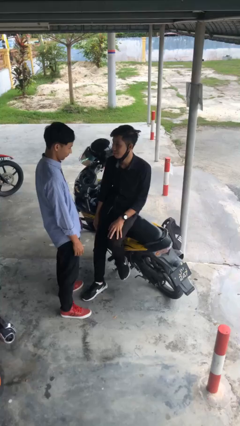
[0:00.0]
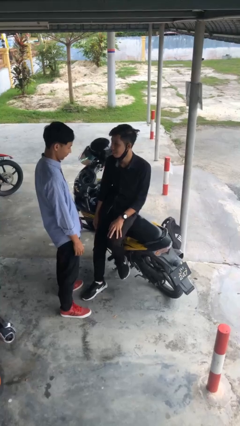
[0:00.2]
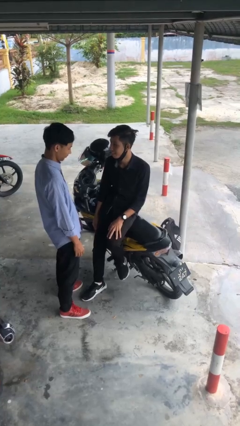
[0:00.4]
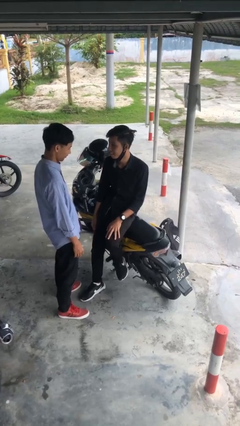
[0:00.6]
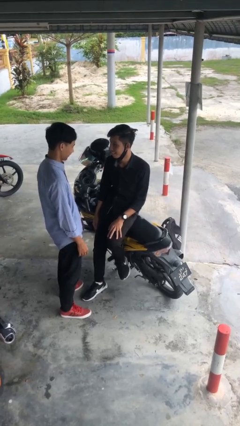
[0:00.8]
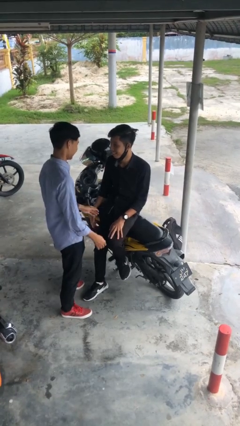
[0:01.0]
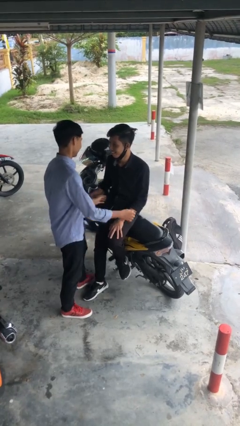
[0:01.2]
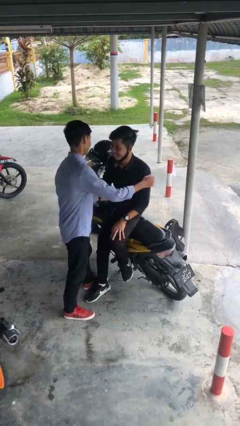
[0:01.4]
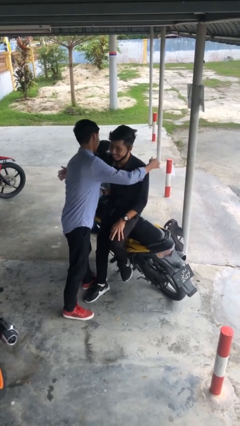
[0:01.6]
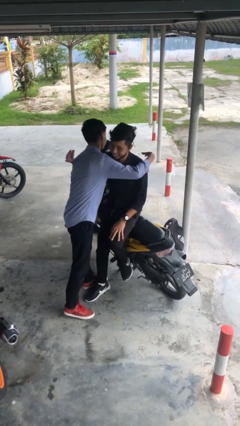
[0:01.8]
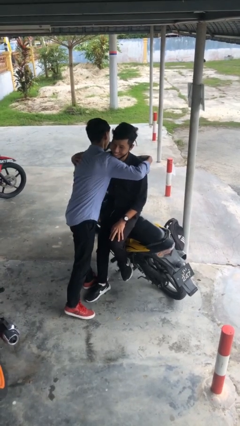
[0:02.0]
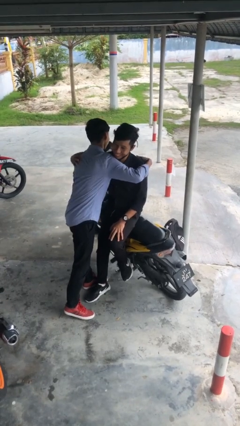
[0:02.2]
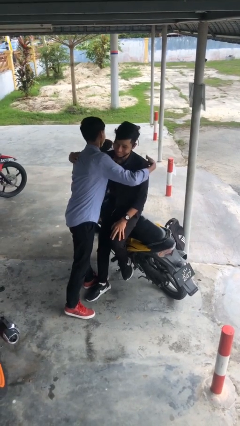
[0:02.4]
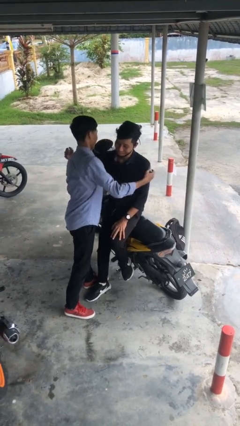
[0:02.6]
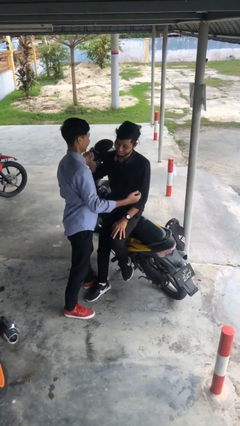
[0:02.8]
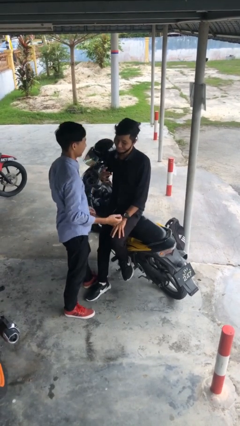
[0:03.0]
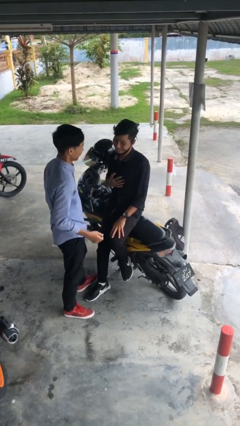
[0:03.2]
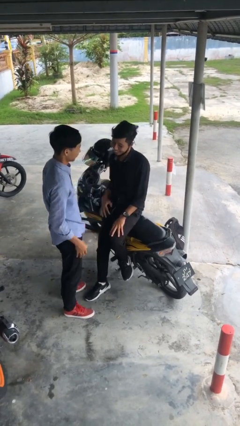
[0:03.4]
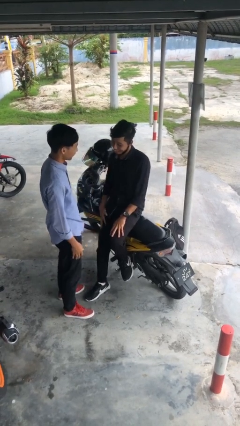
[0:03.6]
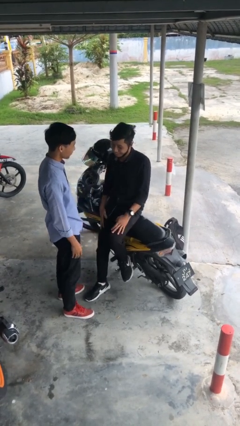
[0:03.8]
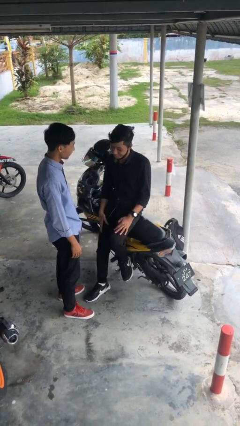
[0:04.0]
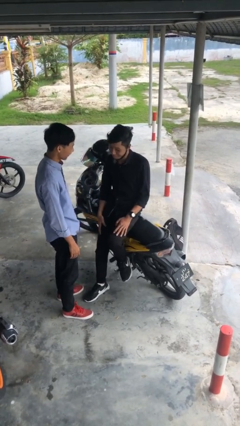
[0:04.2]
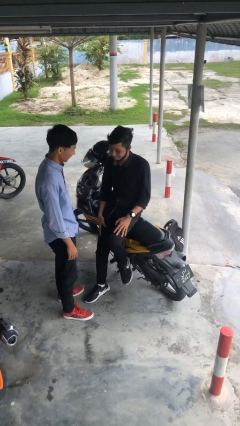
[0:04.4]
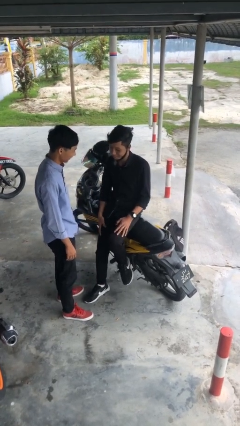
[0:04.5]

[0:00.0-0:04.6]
person embraces person

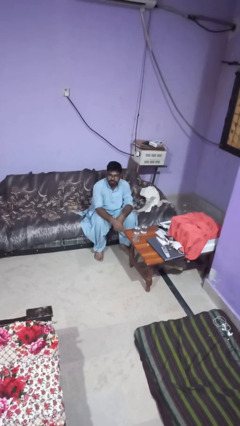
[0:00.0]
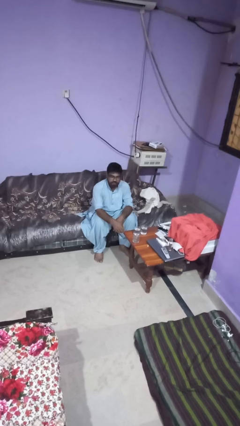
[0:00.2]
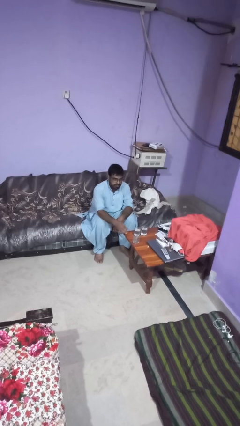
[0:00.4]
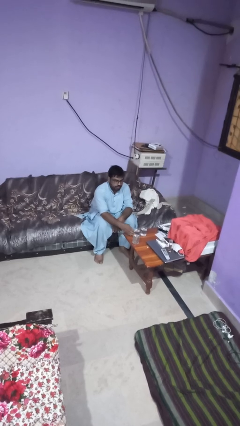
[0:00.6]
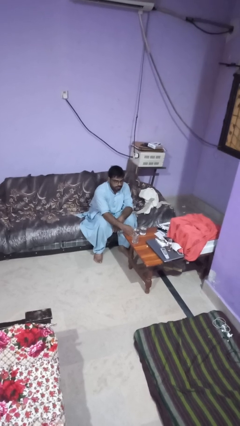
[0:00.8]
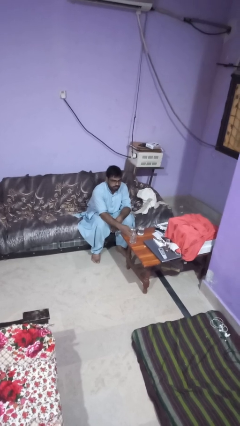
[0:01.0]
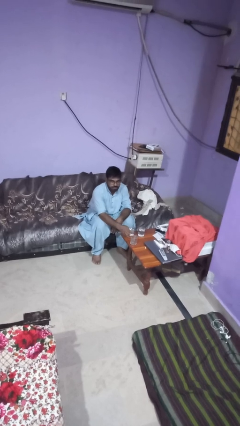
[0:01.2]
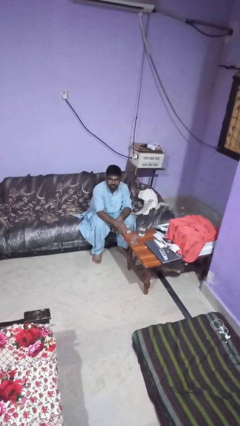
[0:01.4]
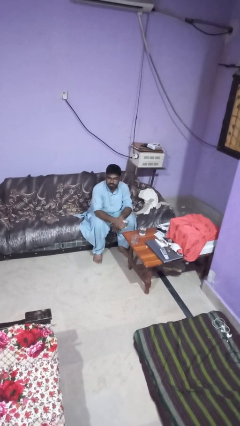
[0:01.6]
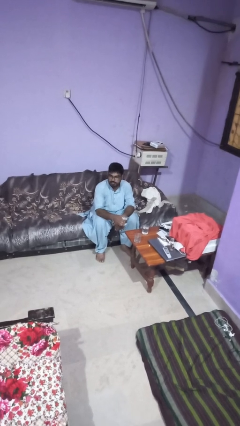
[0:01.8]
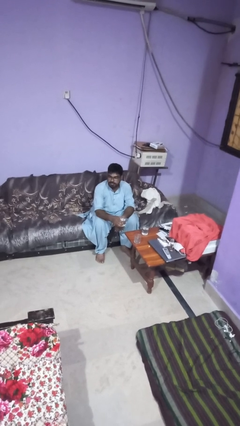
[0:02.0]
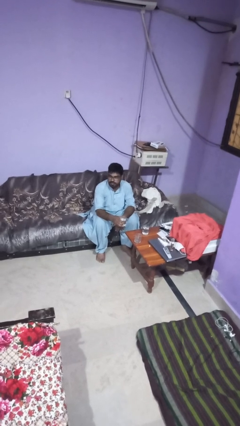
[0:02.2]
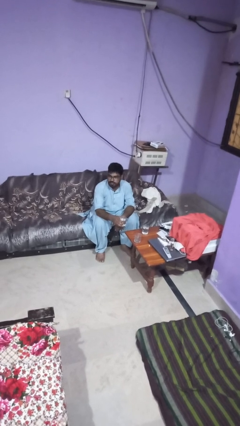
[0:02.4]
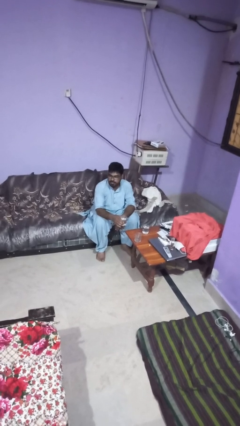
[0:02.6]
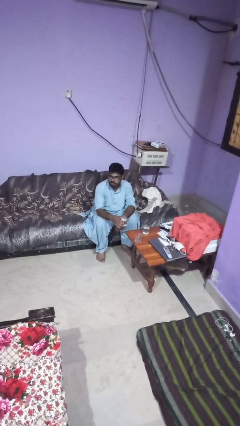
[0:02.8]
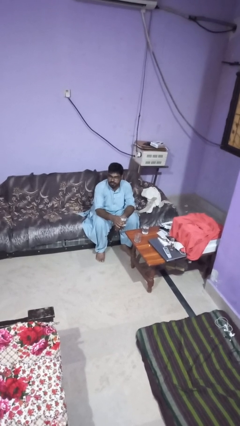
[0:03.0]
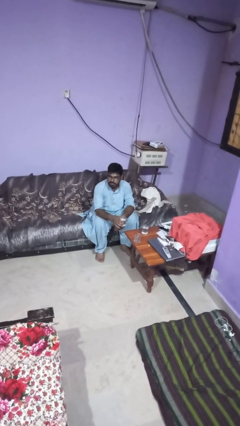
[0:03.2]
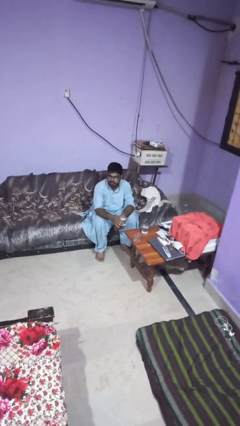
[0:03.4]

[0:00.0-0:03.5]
person picks up object from table

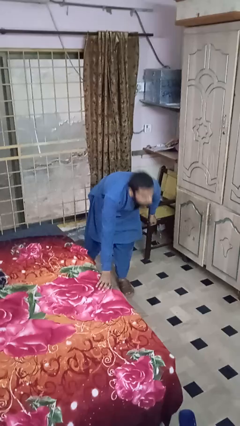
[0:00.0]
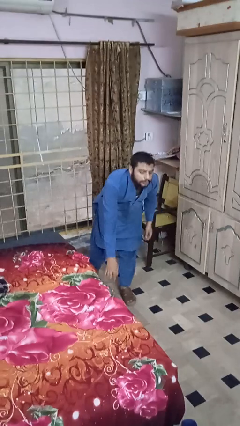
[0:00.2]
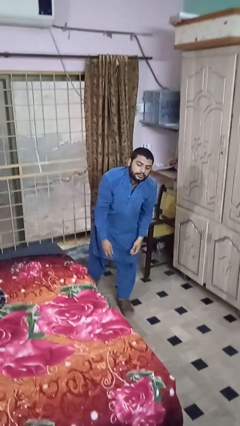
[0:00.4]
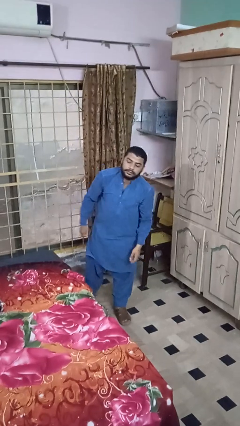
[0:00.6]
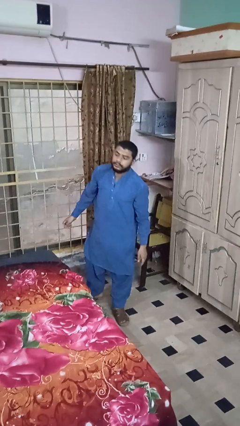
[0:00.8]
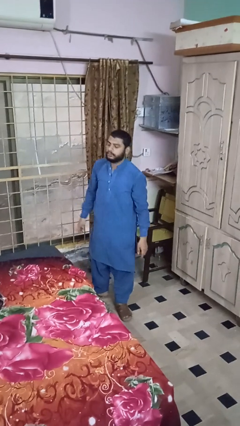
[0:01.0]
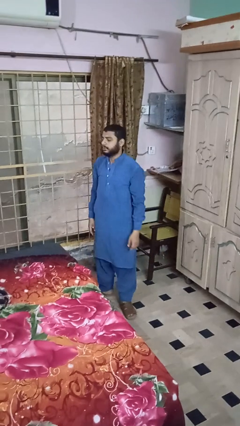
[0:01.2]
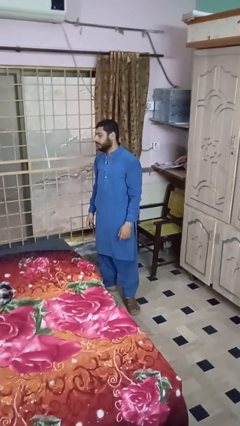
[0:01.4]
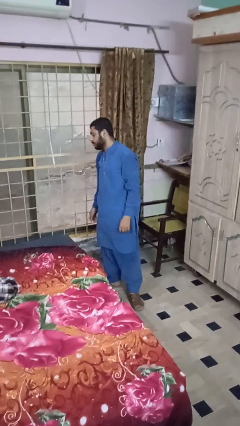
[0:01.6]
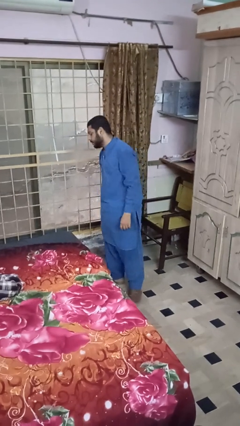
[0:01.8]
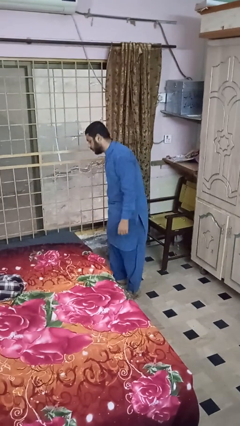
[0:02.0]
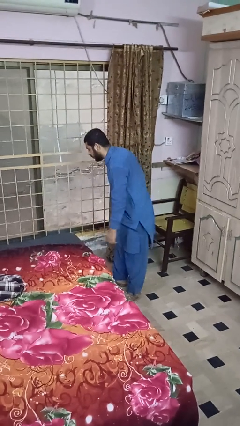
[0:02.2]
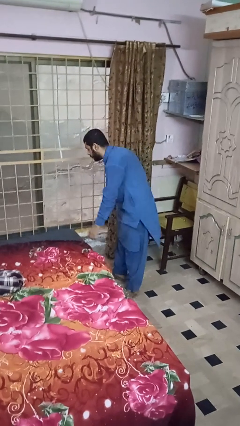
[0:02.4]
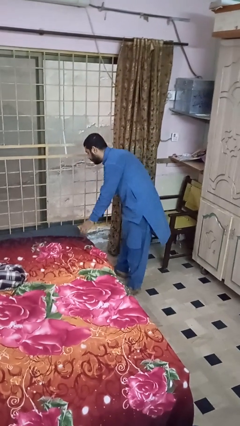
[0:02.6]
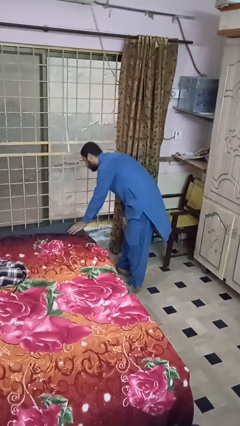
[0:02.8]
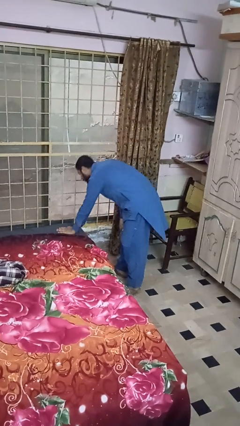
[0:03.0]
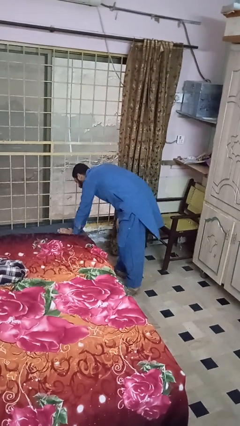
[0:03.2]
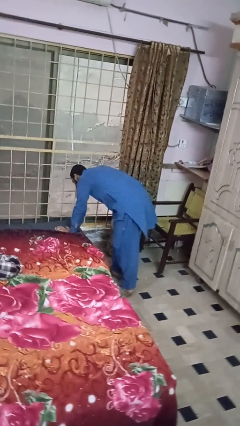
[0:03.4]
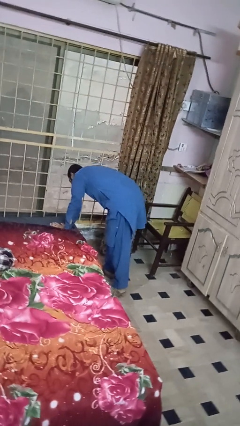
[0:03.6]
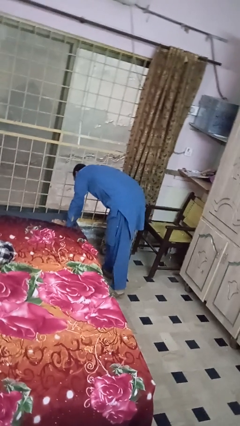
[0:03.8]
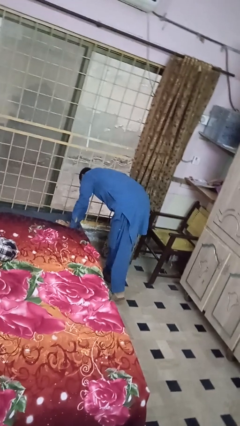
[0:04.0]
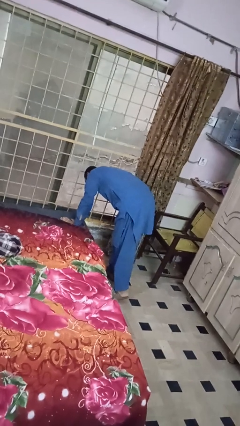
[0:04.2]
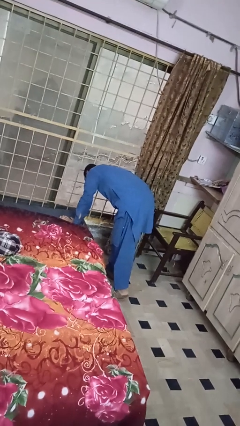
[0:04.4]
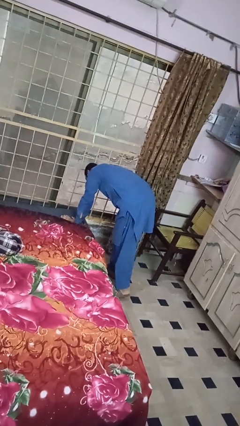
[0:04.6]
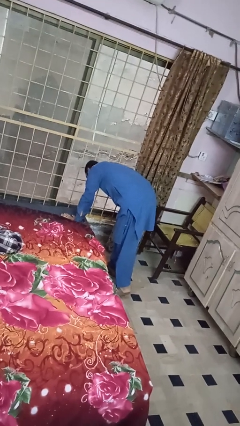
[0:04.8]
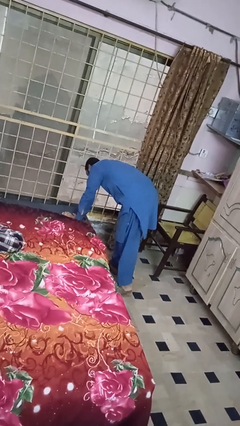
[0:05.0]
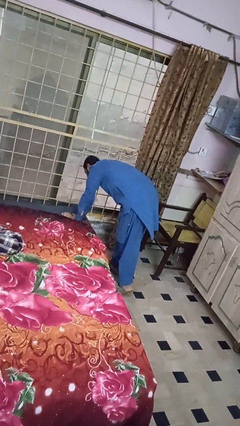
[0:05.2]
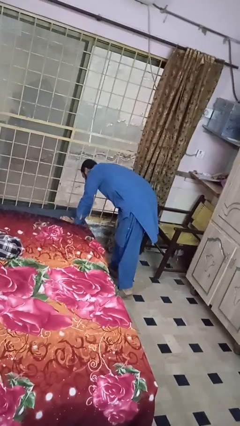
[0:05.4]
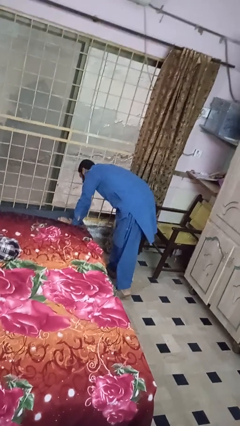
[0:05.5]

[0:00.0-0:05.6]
person searches under bed

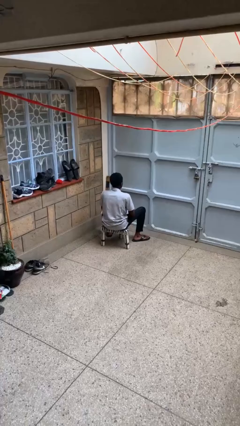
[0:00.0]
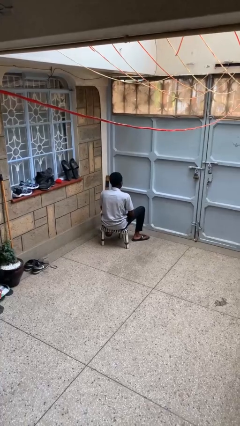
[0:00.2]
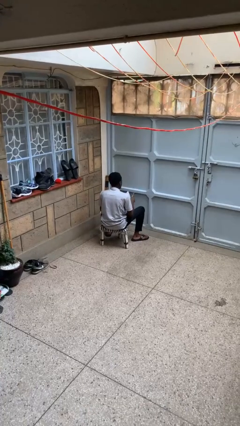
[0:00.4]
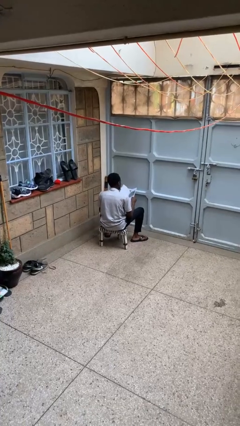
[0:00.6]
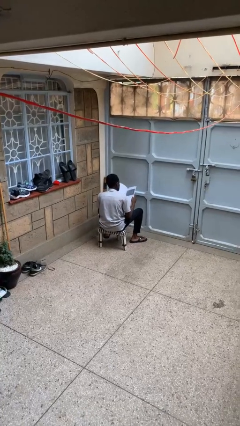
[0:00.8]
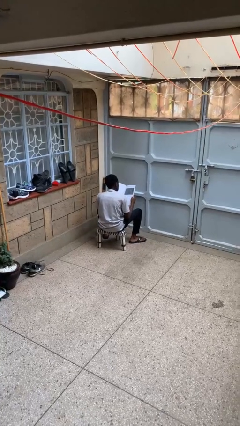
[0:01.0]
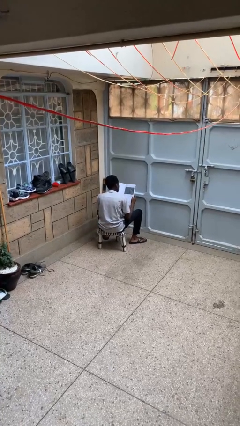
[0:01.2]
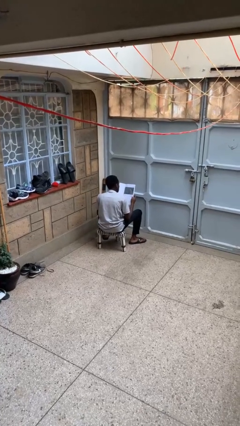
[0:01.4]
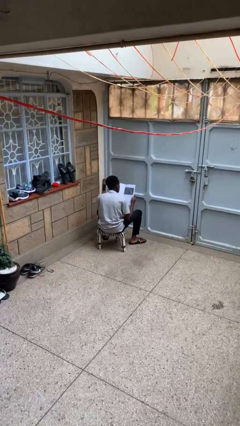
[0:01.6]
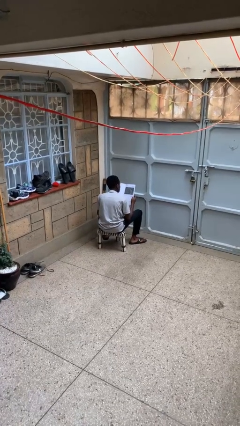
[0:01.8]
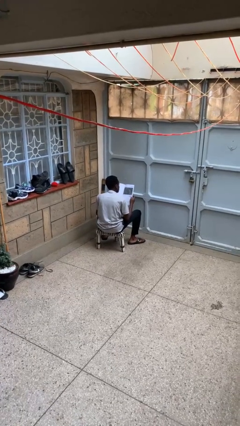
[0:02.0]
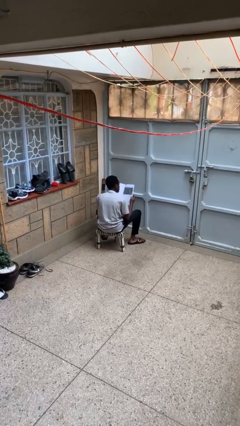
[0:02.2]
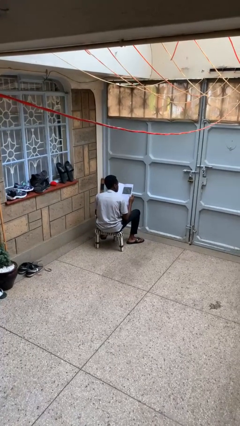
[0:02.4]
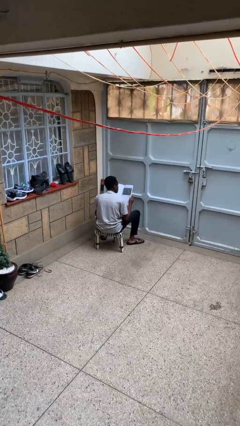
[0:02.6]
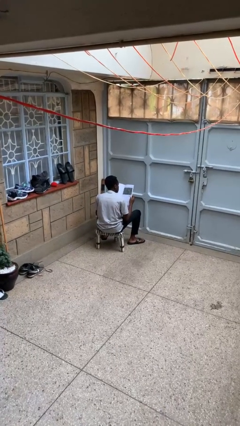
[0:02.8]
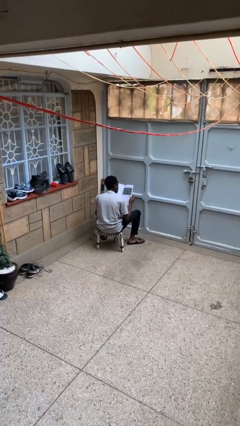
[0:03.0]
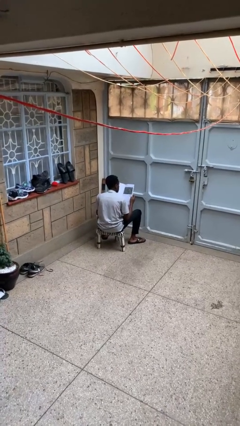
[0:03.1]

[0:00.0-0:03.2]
person reads newspaper

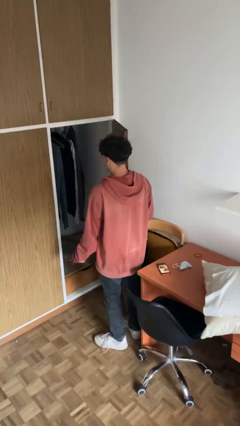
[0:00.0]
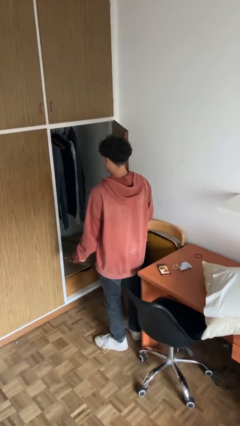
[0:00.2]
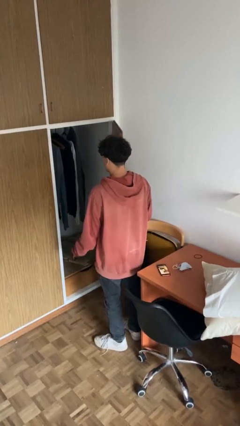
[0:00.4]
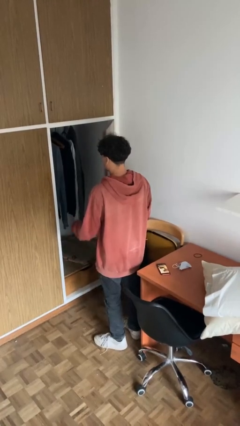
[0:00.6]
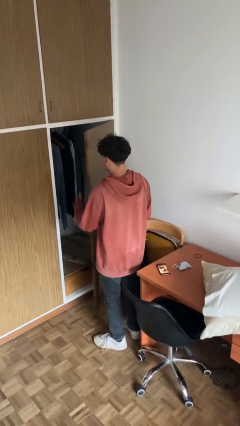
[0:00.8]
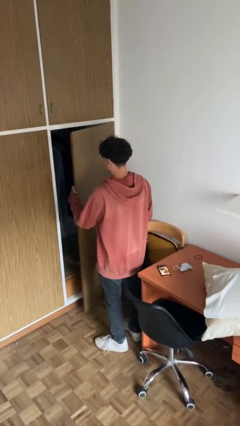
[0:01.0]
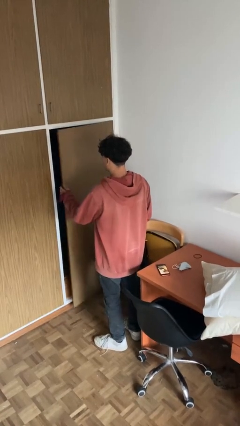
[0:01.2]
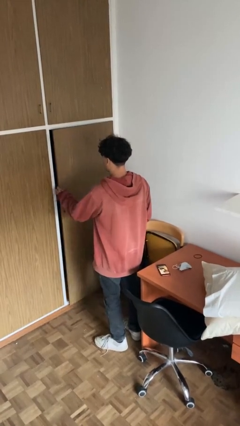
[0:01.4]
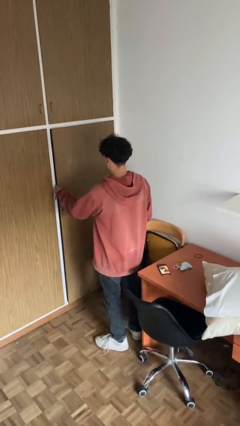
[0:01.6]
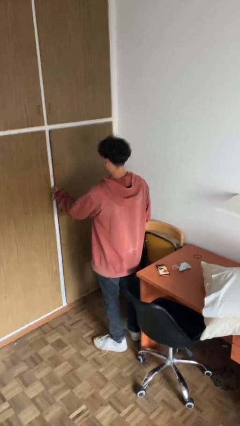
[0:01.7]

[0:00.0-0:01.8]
person closes closet door
